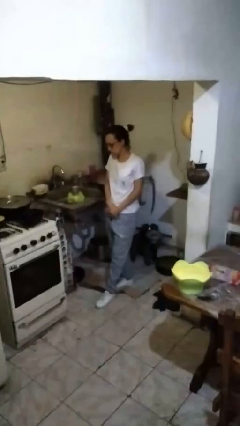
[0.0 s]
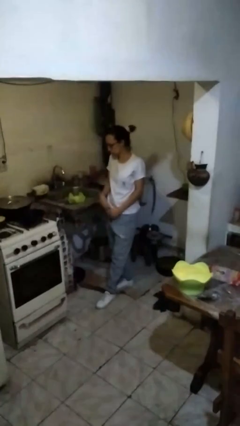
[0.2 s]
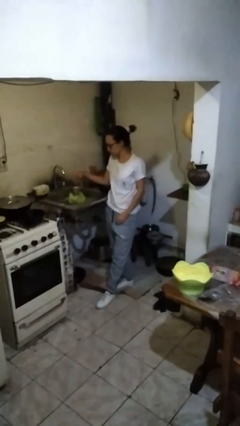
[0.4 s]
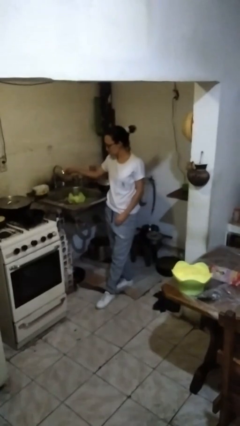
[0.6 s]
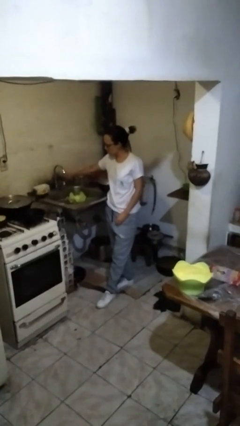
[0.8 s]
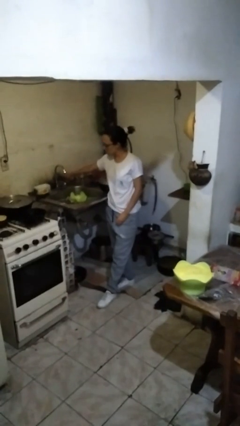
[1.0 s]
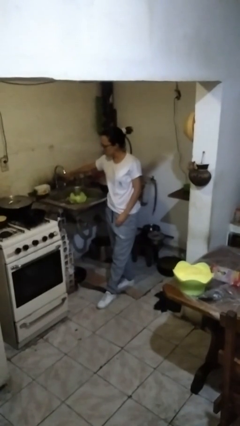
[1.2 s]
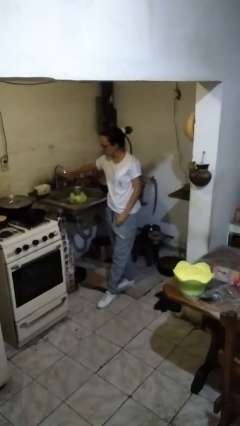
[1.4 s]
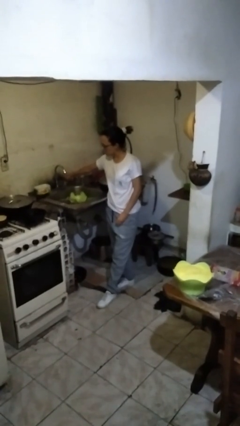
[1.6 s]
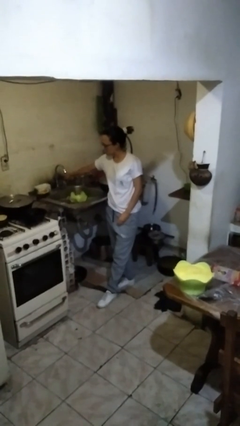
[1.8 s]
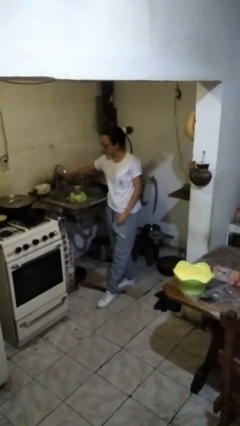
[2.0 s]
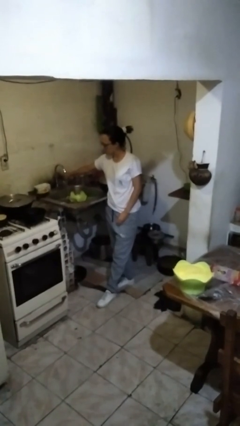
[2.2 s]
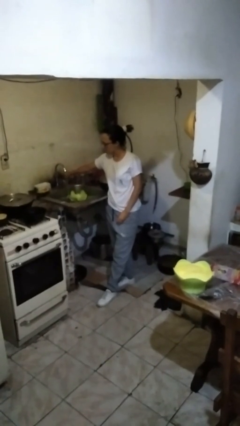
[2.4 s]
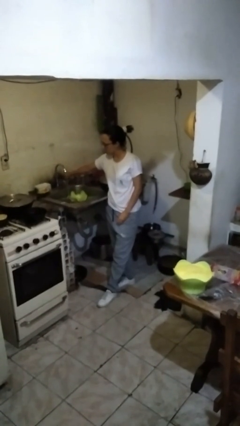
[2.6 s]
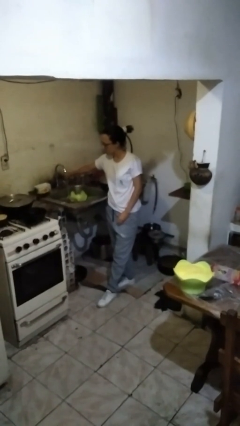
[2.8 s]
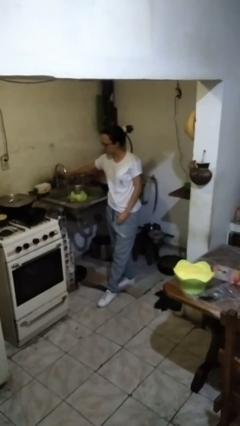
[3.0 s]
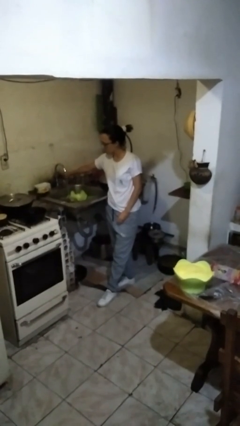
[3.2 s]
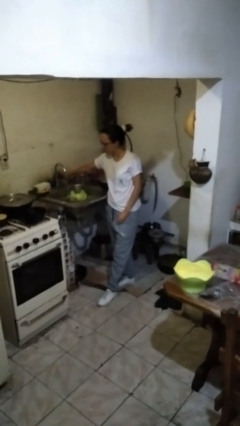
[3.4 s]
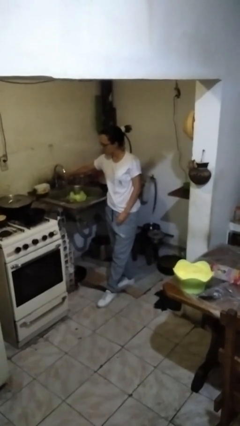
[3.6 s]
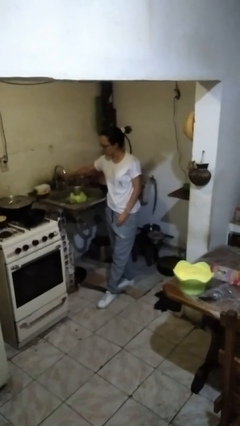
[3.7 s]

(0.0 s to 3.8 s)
person turns on faucet

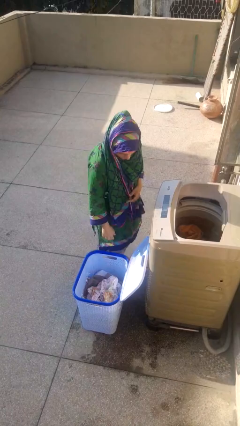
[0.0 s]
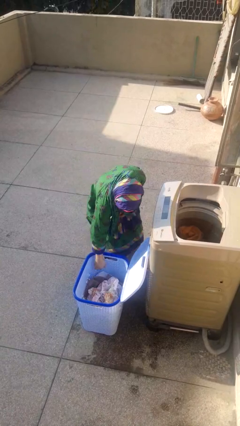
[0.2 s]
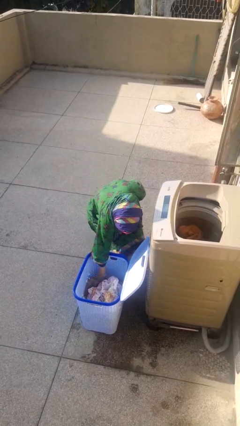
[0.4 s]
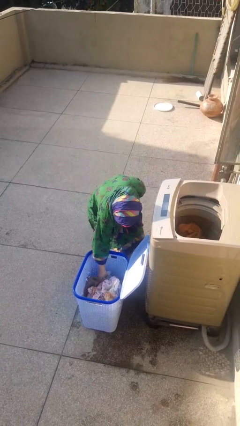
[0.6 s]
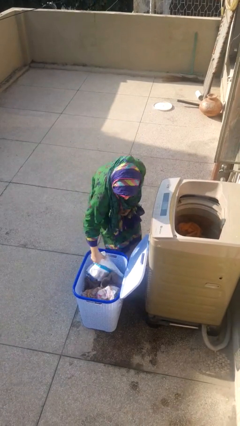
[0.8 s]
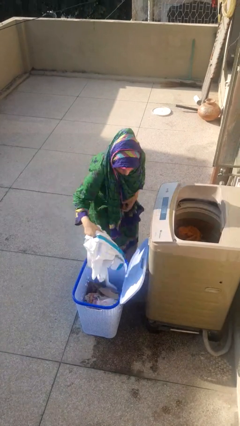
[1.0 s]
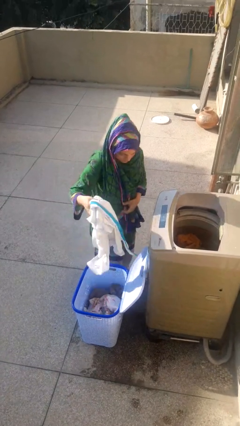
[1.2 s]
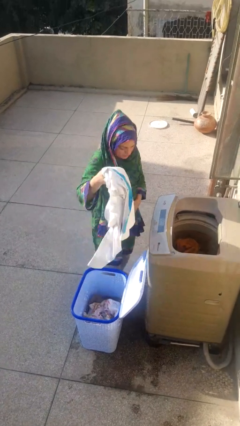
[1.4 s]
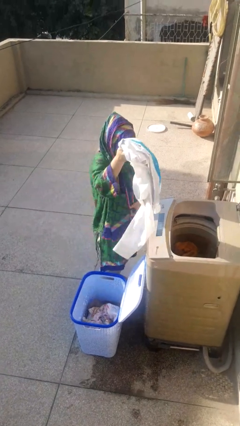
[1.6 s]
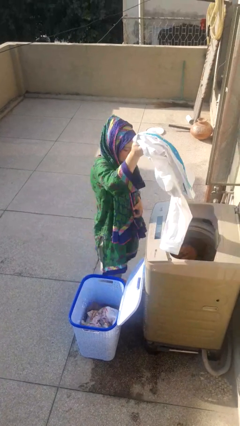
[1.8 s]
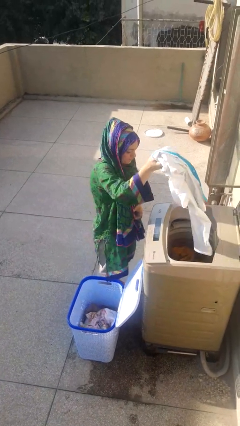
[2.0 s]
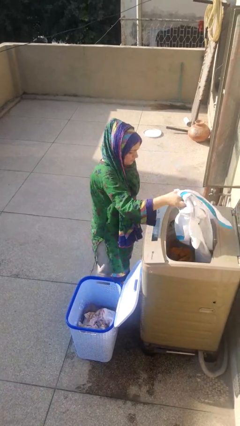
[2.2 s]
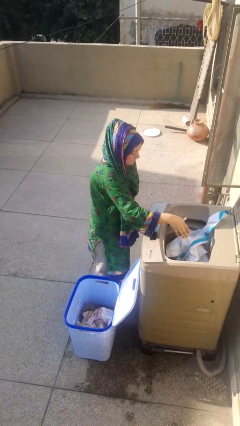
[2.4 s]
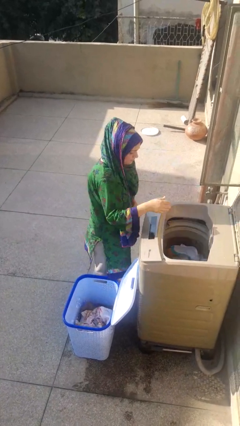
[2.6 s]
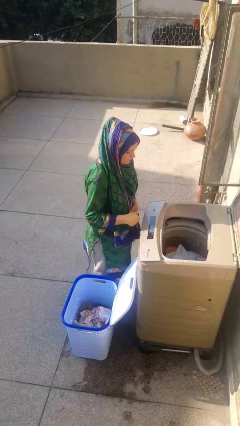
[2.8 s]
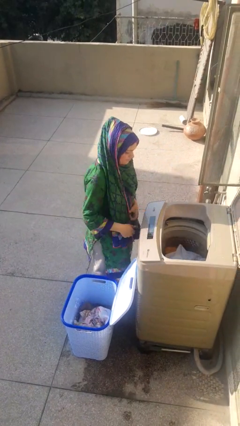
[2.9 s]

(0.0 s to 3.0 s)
person loads clotheswasher

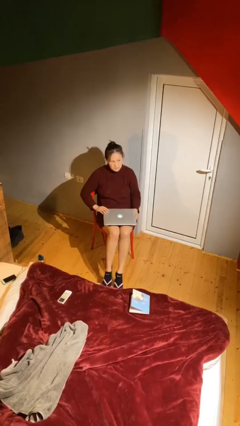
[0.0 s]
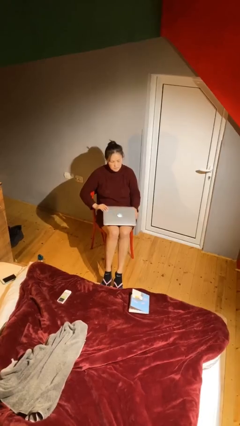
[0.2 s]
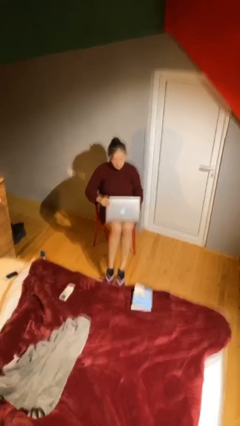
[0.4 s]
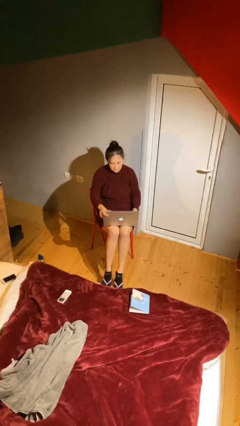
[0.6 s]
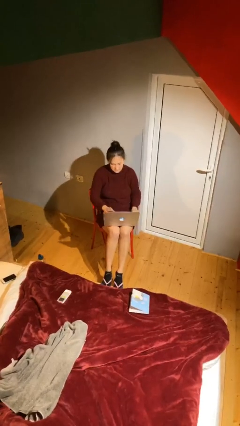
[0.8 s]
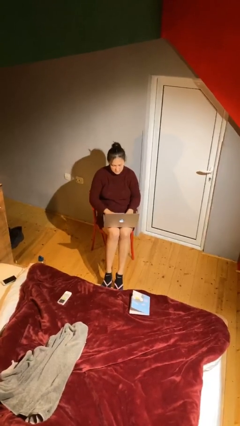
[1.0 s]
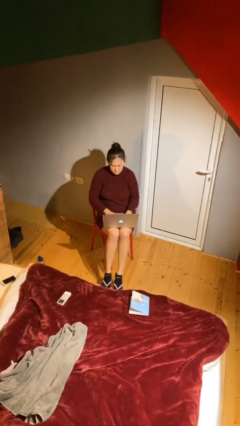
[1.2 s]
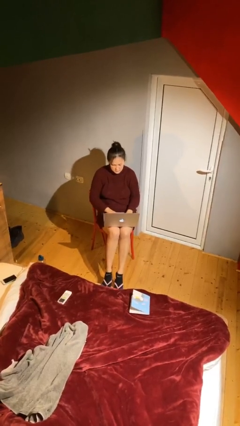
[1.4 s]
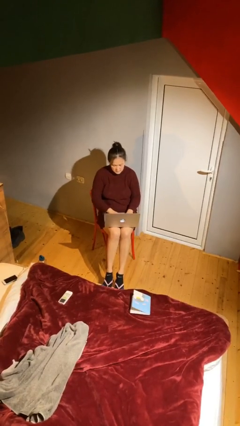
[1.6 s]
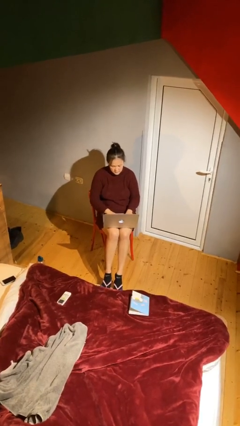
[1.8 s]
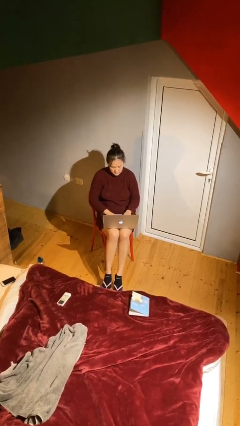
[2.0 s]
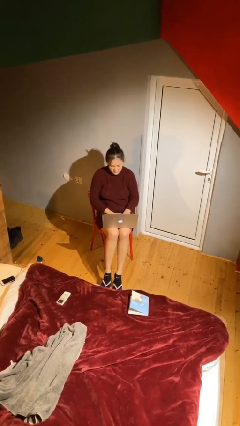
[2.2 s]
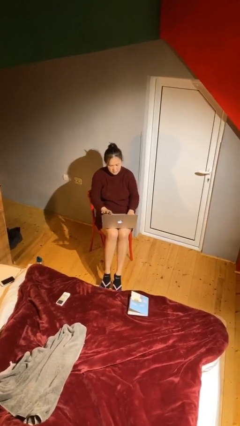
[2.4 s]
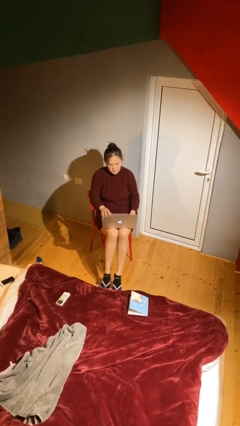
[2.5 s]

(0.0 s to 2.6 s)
person interacts with laptop

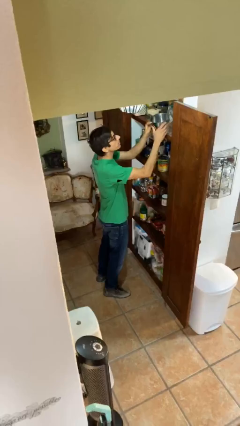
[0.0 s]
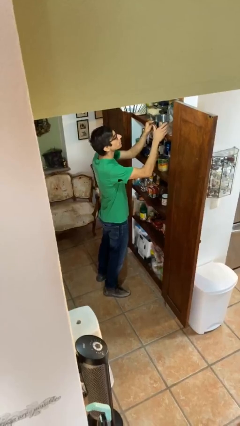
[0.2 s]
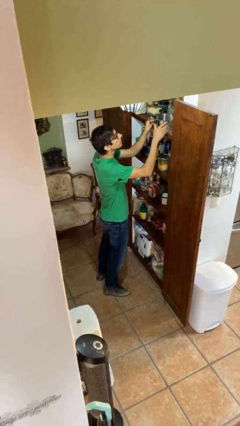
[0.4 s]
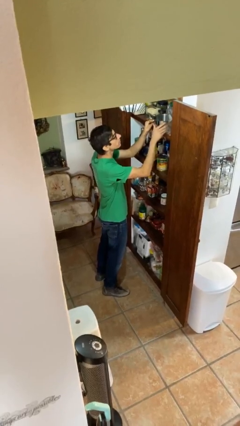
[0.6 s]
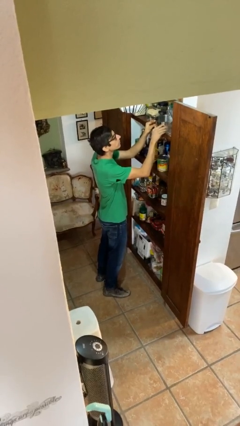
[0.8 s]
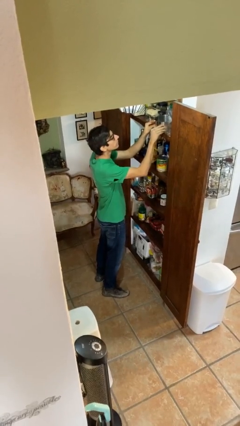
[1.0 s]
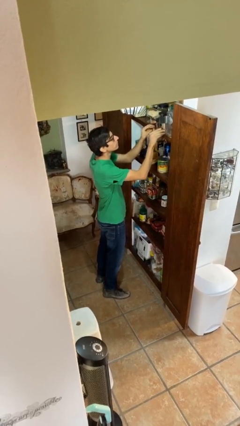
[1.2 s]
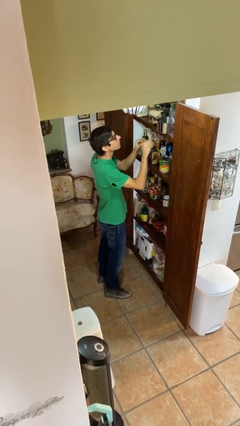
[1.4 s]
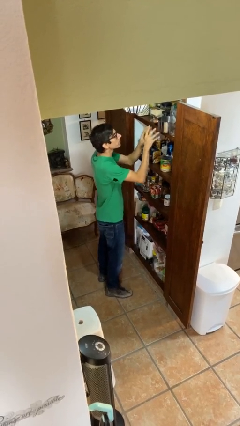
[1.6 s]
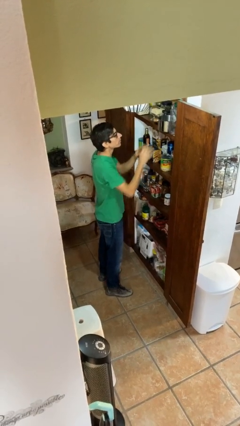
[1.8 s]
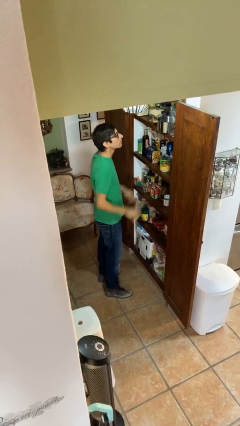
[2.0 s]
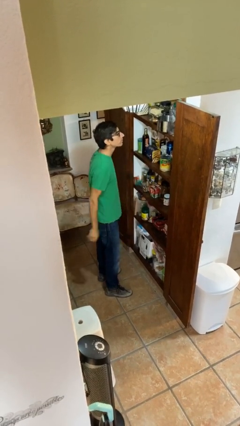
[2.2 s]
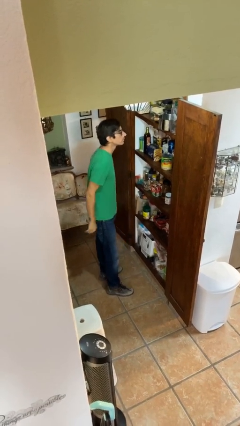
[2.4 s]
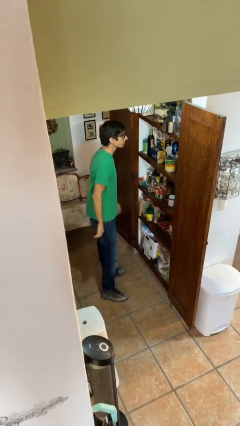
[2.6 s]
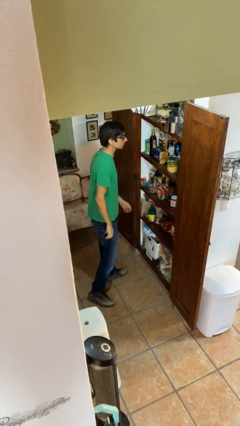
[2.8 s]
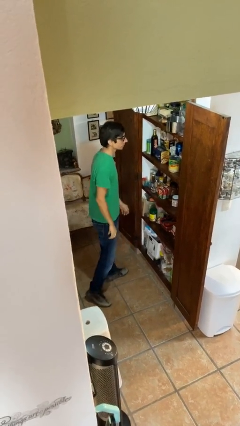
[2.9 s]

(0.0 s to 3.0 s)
person puts down object on shelf

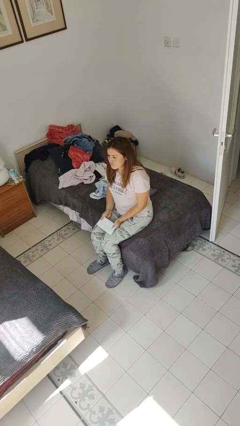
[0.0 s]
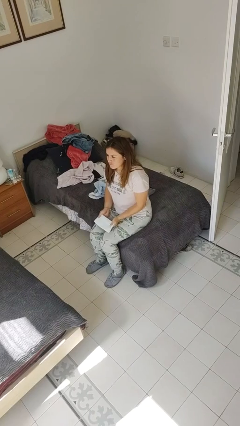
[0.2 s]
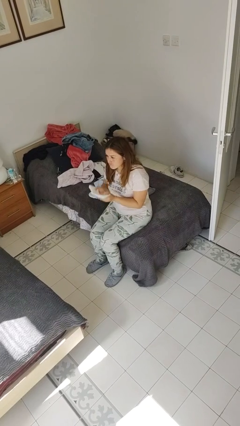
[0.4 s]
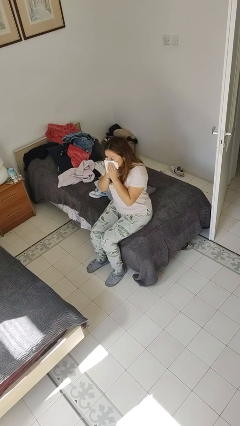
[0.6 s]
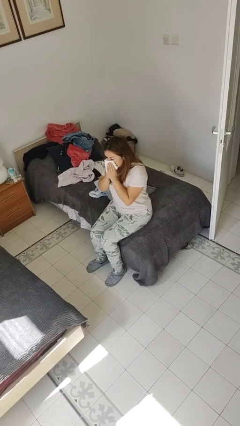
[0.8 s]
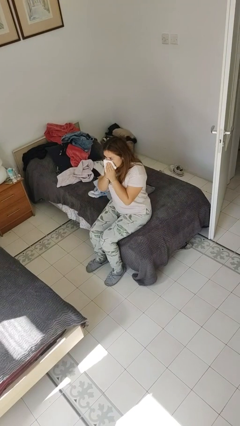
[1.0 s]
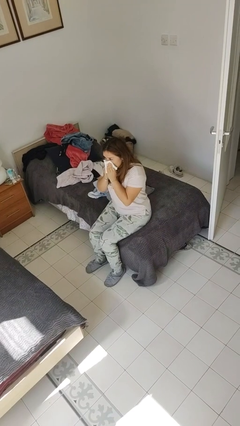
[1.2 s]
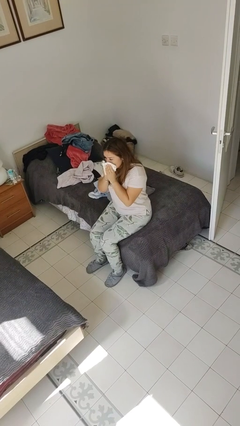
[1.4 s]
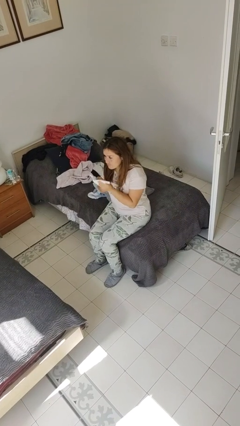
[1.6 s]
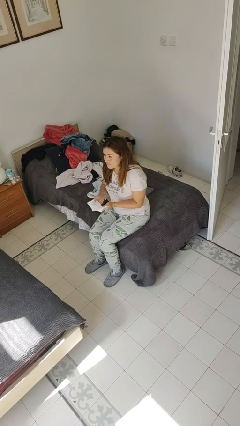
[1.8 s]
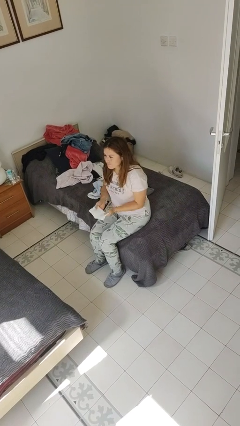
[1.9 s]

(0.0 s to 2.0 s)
person blows nose

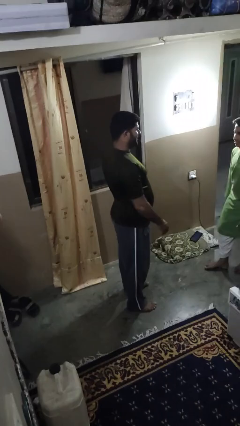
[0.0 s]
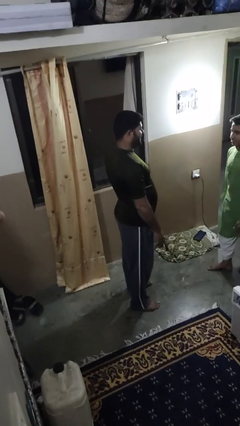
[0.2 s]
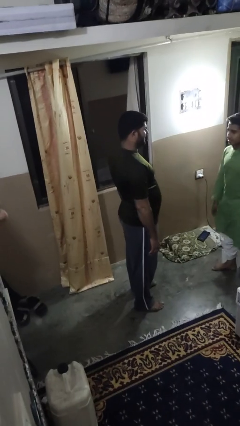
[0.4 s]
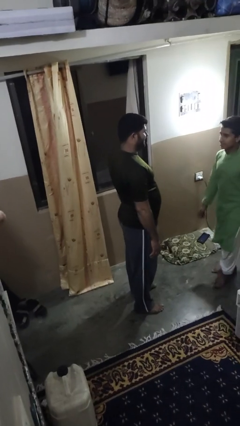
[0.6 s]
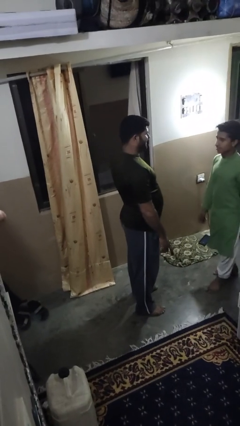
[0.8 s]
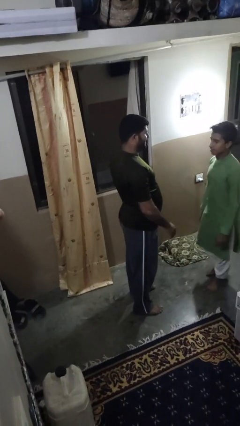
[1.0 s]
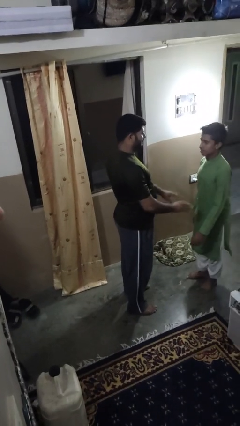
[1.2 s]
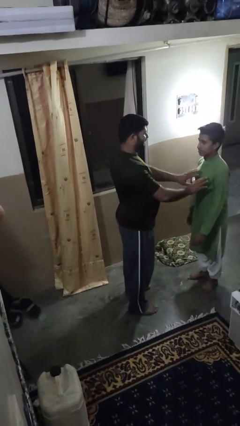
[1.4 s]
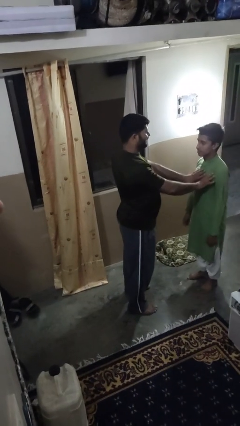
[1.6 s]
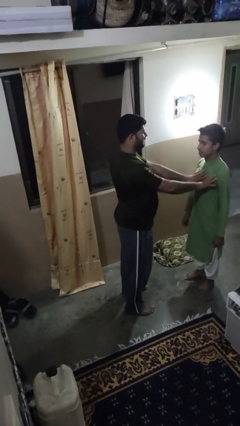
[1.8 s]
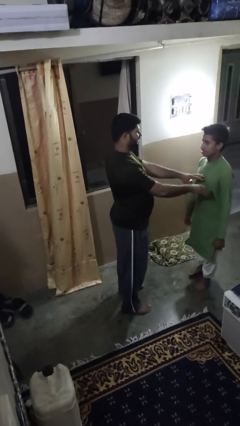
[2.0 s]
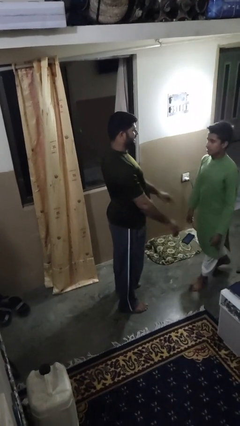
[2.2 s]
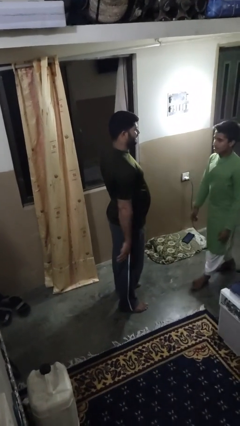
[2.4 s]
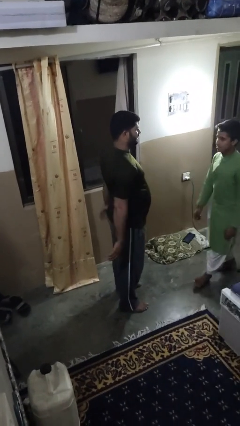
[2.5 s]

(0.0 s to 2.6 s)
person shoves person

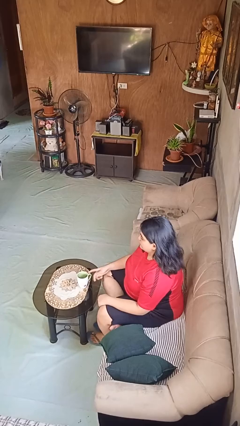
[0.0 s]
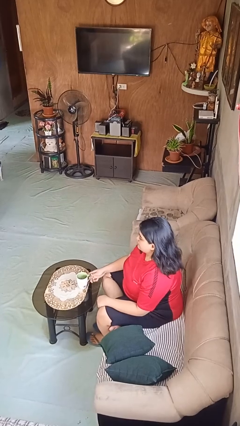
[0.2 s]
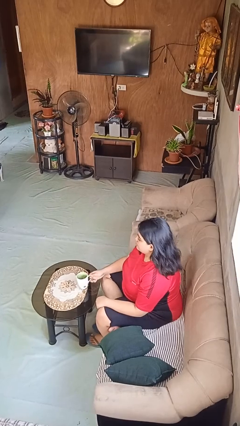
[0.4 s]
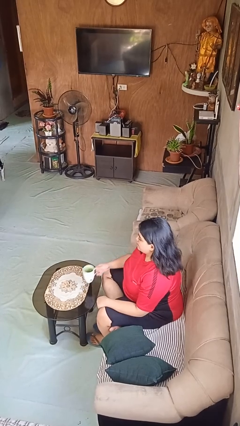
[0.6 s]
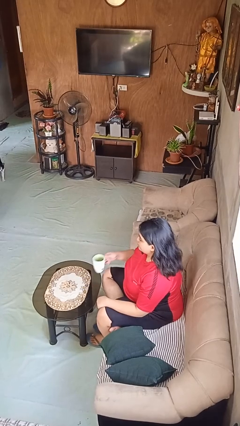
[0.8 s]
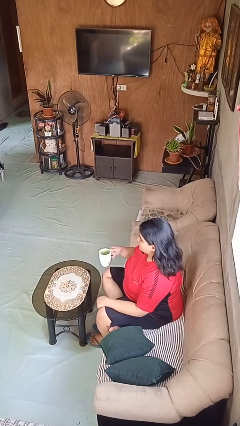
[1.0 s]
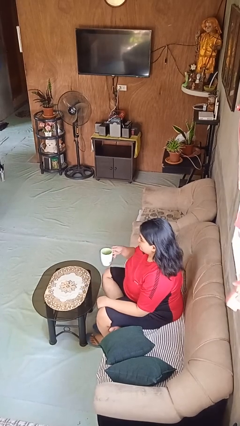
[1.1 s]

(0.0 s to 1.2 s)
person picks up object from table
